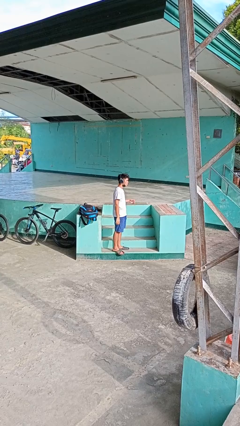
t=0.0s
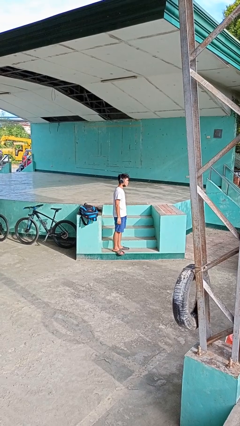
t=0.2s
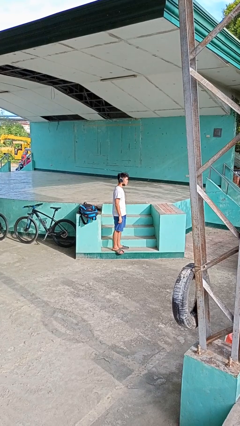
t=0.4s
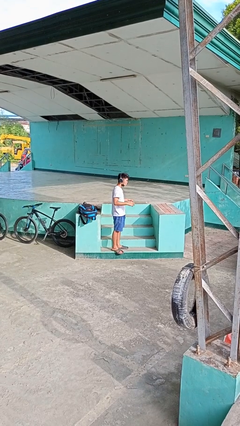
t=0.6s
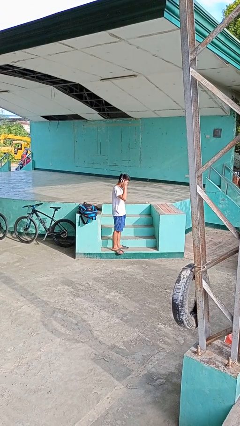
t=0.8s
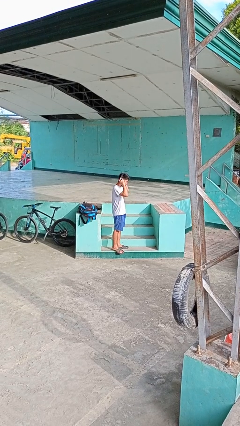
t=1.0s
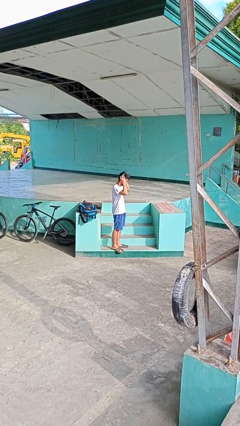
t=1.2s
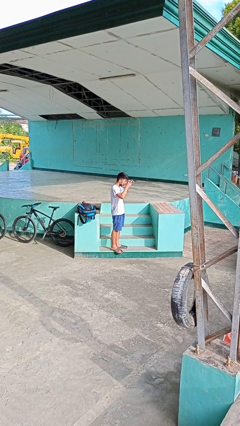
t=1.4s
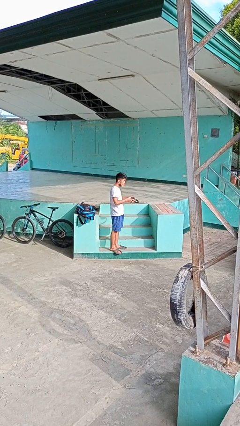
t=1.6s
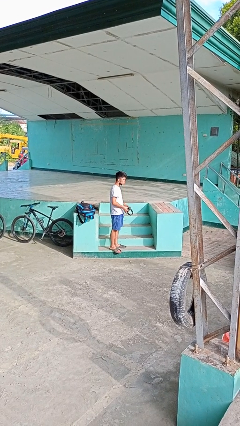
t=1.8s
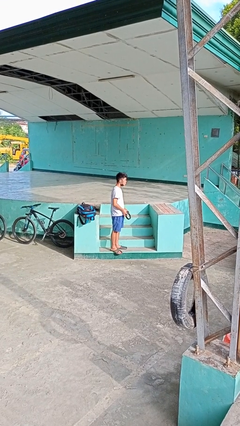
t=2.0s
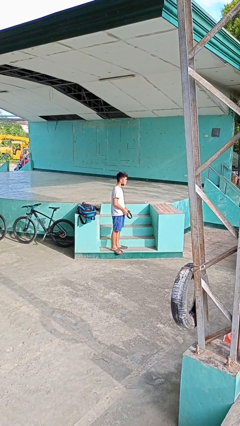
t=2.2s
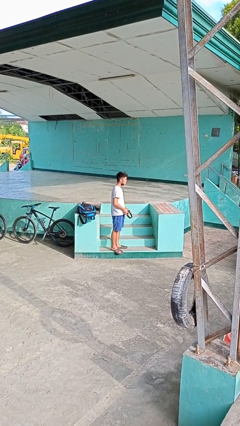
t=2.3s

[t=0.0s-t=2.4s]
person takes off headphones

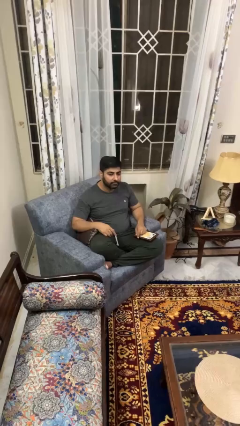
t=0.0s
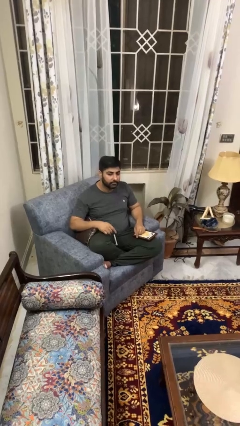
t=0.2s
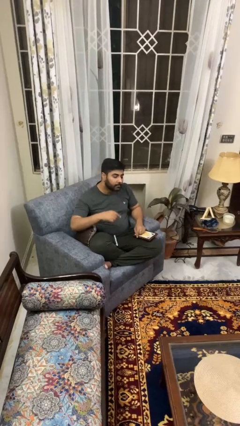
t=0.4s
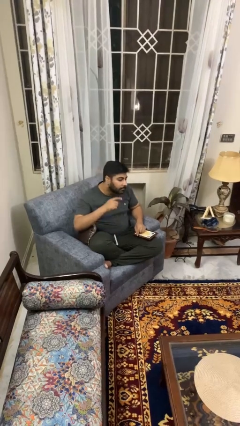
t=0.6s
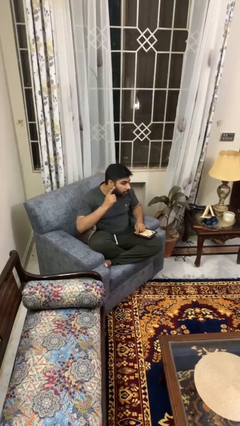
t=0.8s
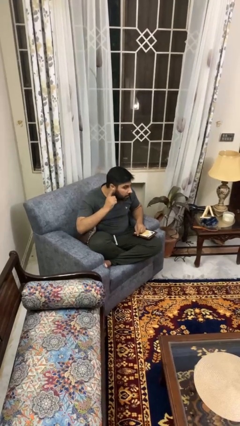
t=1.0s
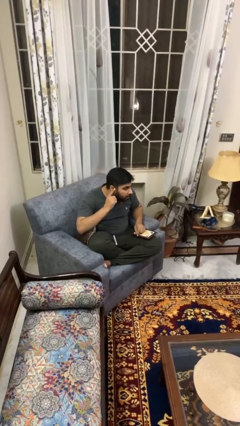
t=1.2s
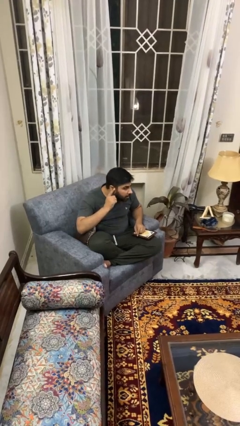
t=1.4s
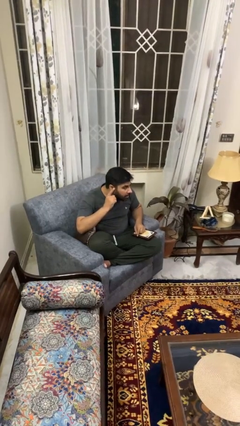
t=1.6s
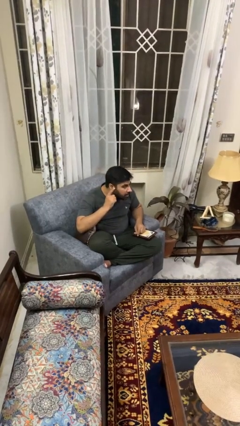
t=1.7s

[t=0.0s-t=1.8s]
person gestures listen closely

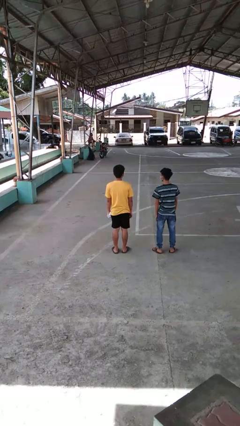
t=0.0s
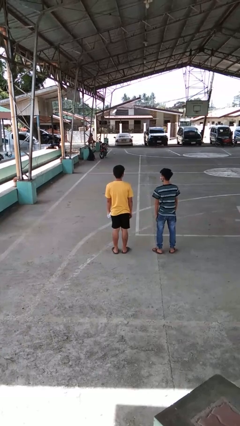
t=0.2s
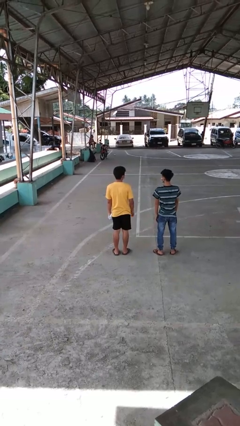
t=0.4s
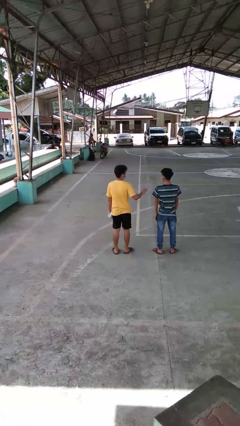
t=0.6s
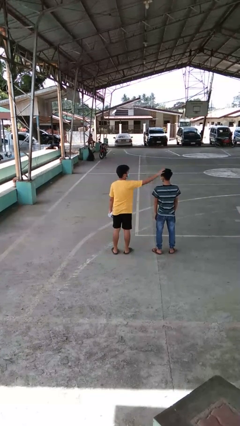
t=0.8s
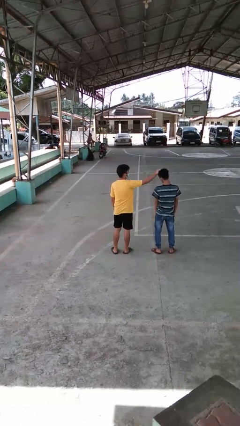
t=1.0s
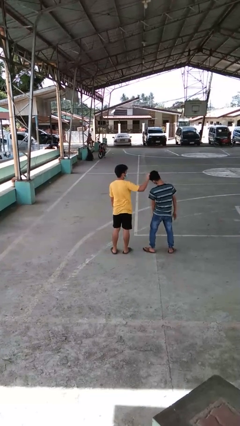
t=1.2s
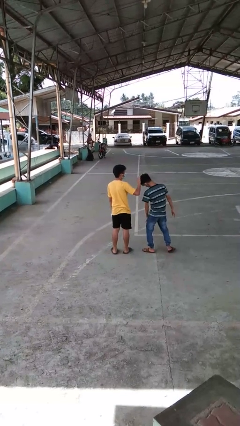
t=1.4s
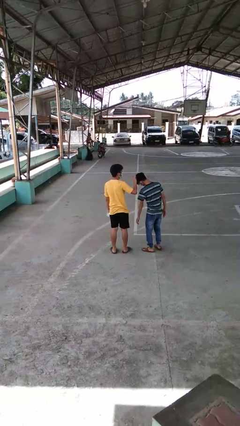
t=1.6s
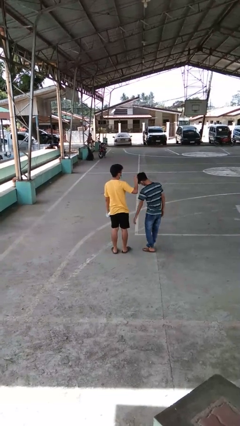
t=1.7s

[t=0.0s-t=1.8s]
person grabs person by hair

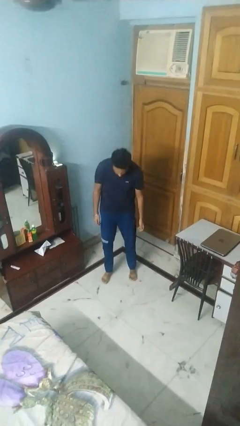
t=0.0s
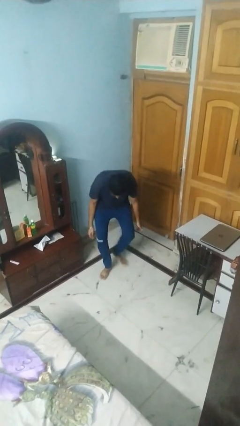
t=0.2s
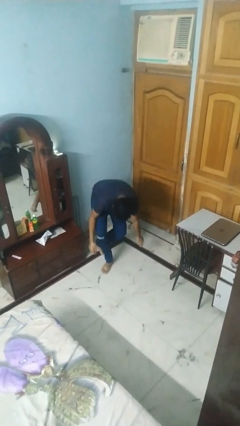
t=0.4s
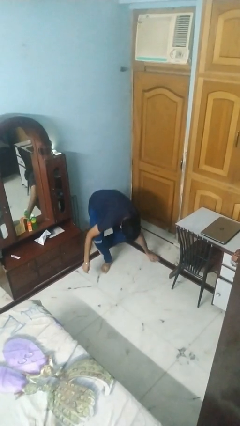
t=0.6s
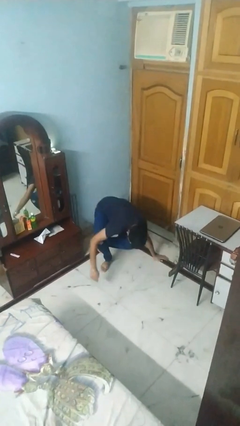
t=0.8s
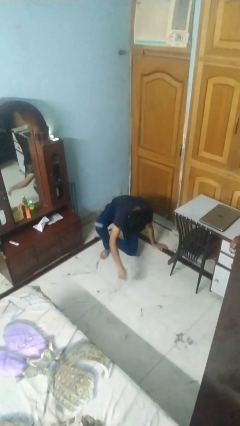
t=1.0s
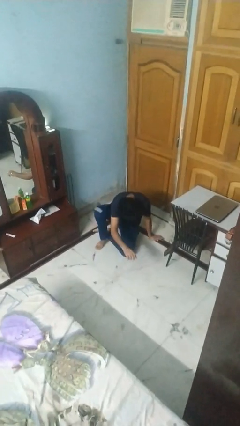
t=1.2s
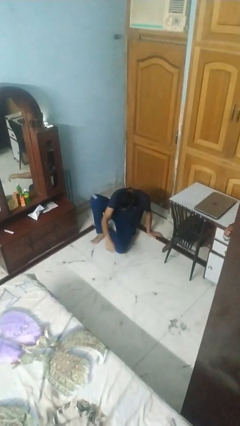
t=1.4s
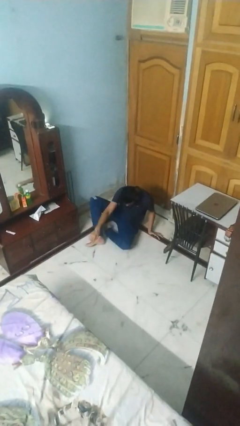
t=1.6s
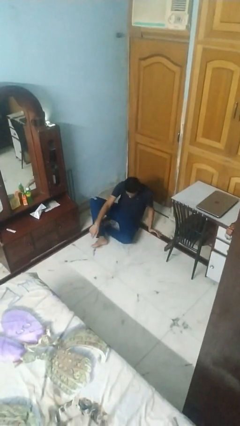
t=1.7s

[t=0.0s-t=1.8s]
person sits crisscross

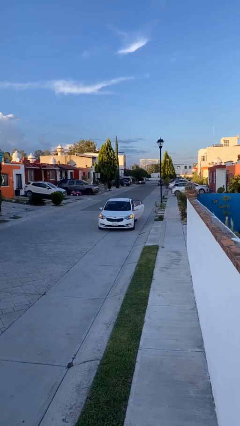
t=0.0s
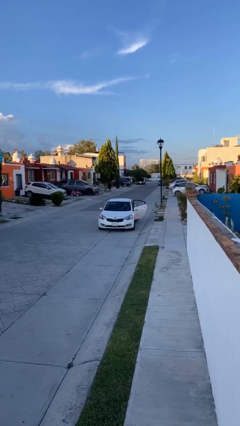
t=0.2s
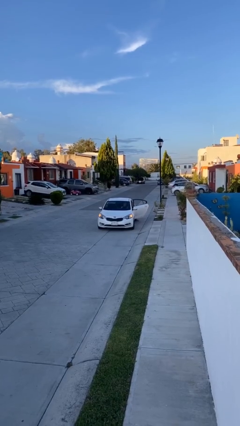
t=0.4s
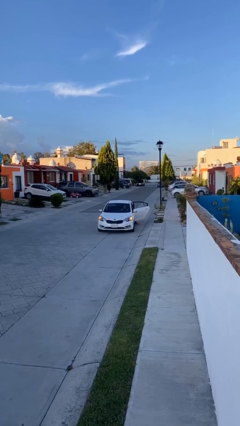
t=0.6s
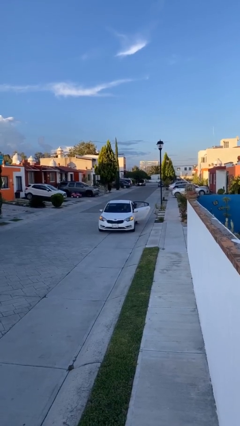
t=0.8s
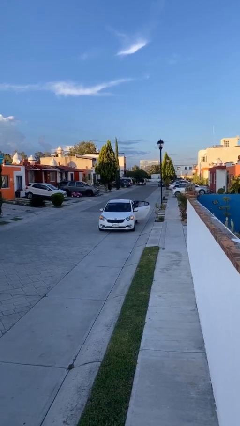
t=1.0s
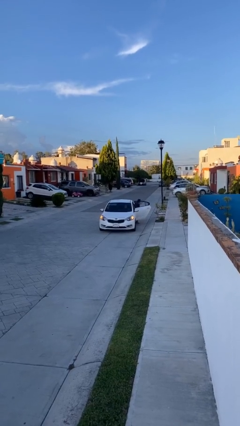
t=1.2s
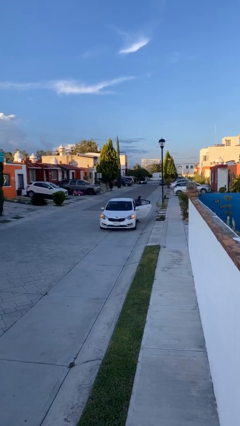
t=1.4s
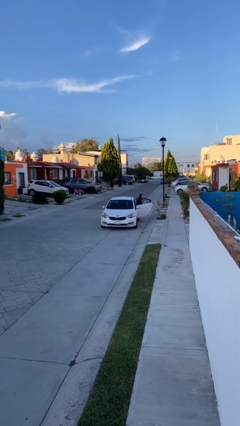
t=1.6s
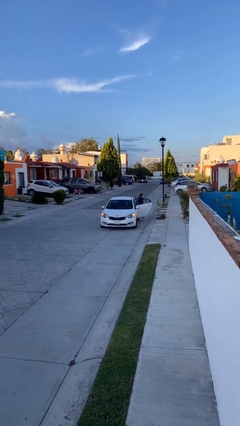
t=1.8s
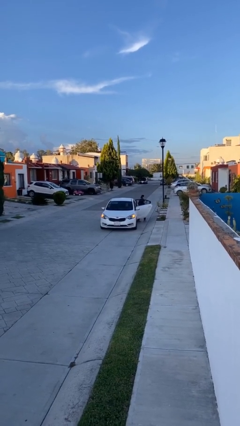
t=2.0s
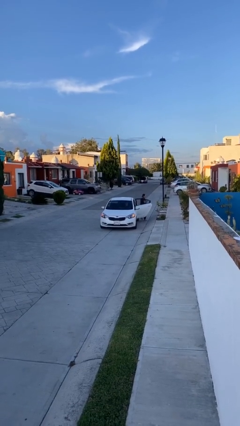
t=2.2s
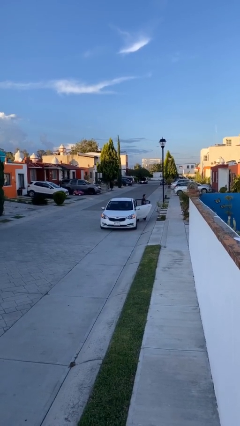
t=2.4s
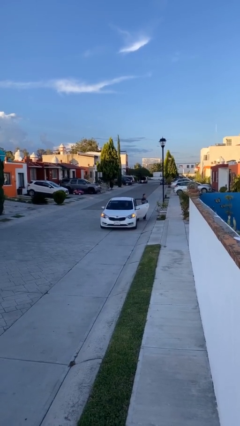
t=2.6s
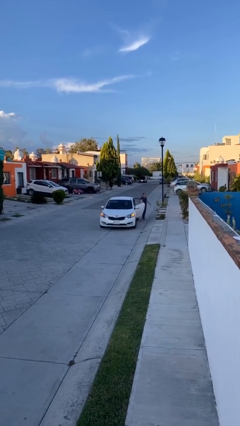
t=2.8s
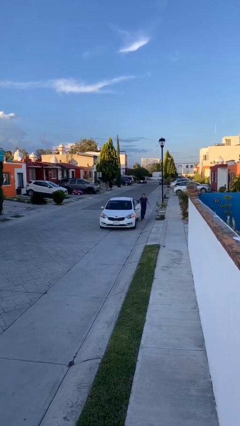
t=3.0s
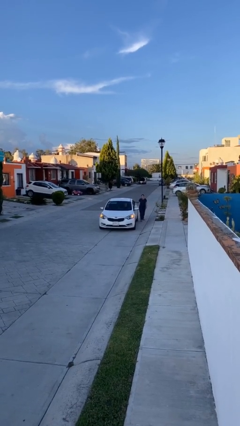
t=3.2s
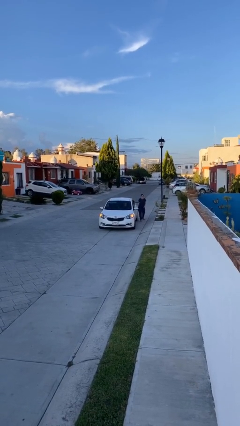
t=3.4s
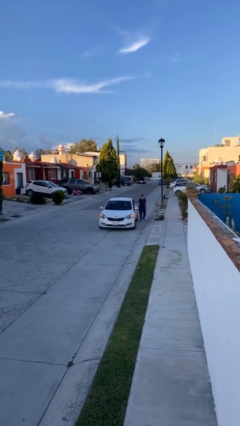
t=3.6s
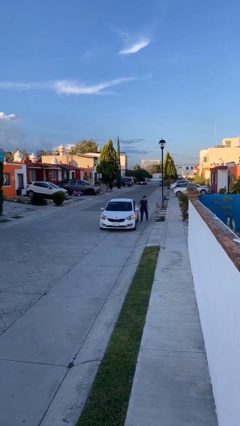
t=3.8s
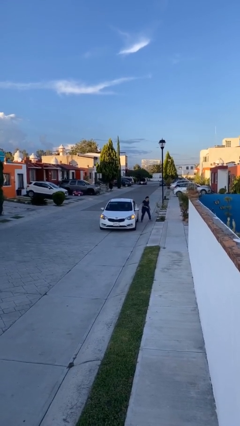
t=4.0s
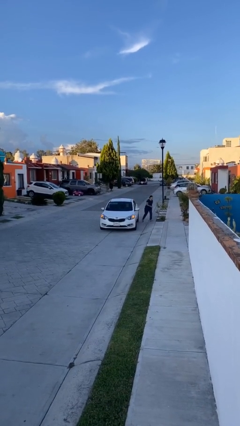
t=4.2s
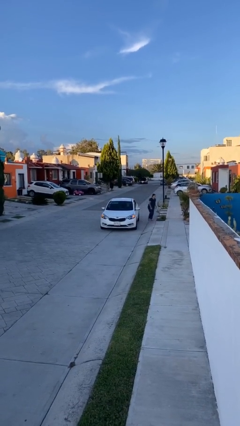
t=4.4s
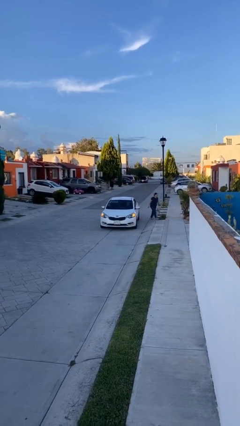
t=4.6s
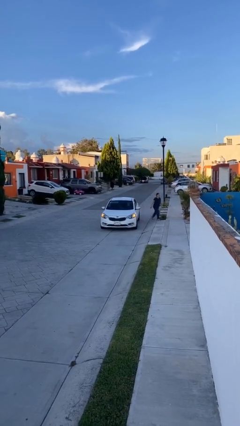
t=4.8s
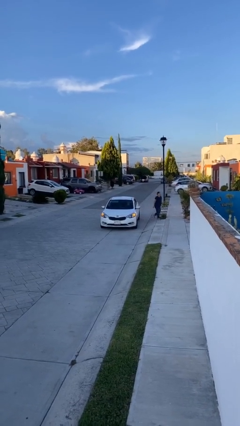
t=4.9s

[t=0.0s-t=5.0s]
car drops off person

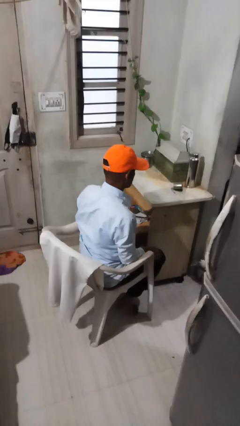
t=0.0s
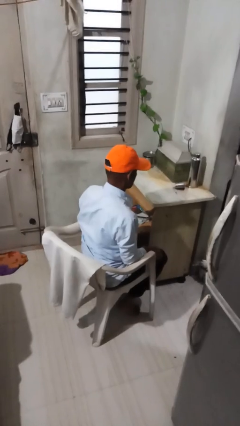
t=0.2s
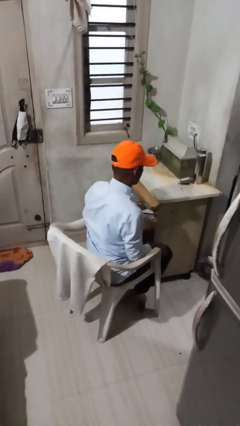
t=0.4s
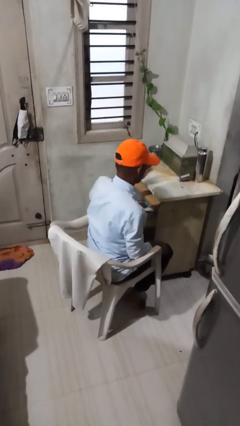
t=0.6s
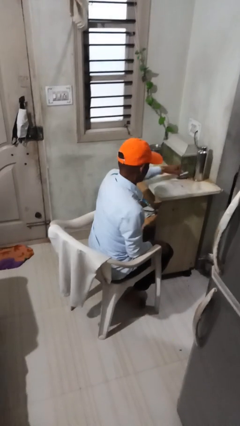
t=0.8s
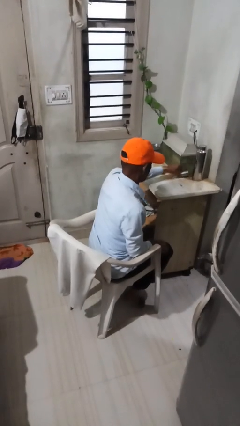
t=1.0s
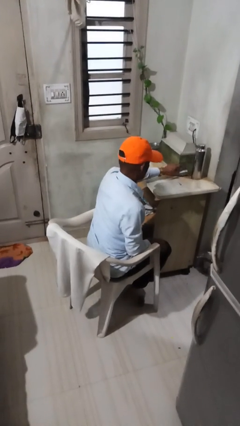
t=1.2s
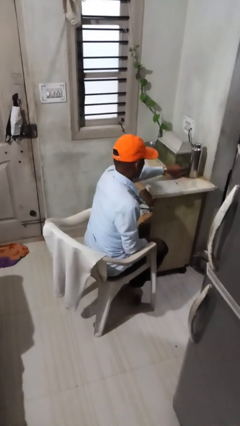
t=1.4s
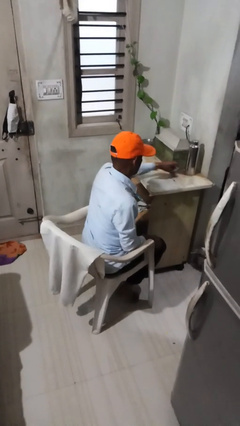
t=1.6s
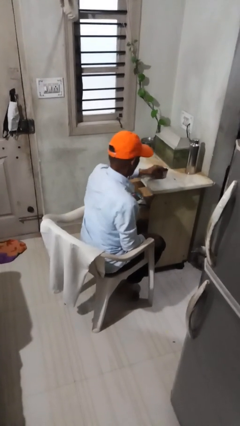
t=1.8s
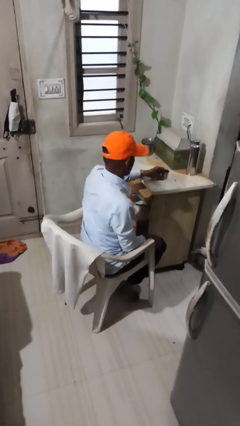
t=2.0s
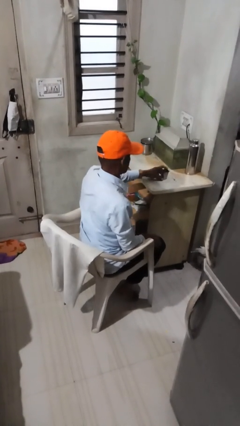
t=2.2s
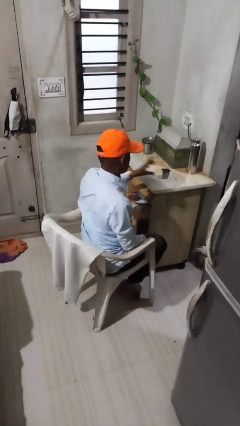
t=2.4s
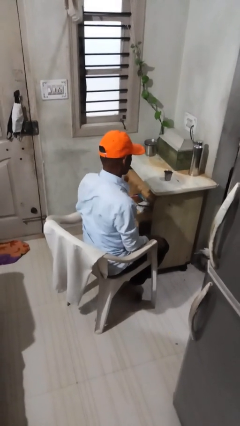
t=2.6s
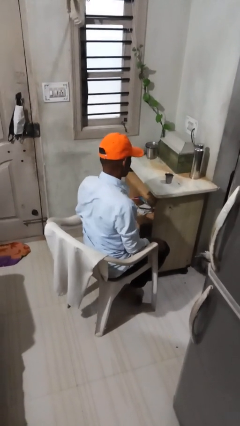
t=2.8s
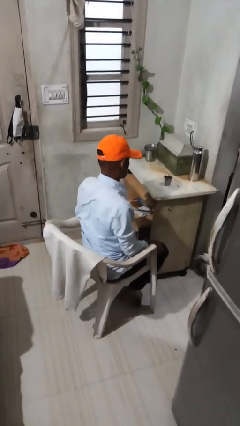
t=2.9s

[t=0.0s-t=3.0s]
person sets upright glass

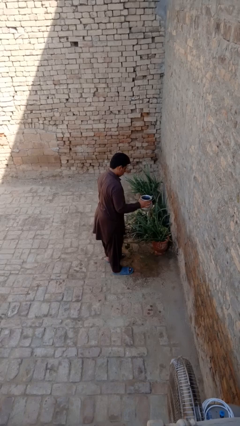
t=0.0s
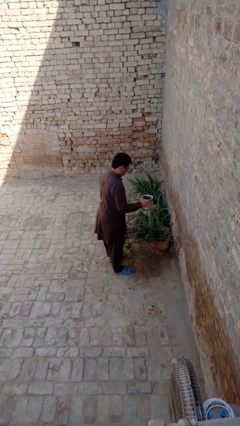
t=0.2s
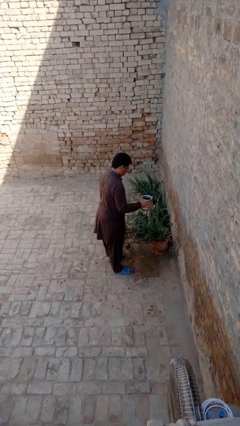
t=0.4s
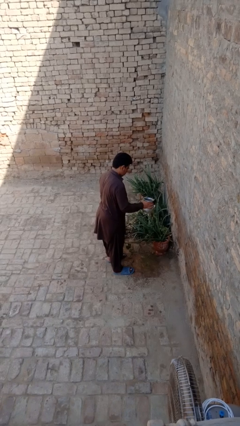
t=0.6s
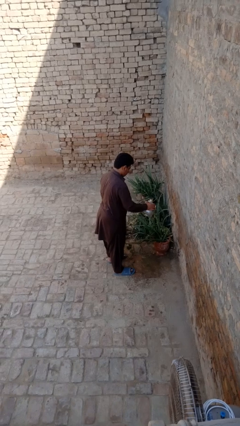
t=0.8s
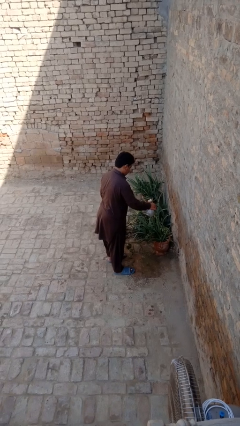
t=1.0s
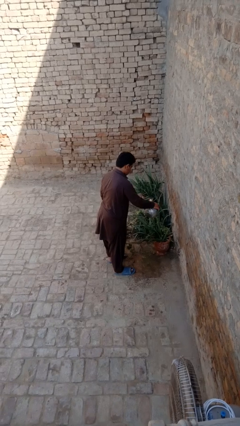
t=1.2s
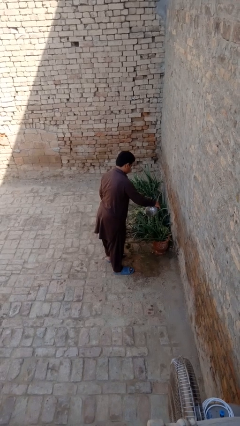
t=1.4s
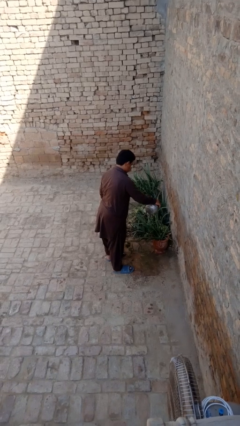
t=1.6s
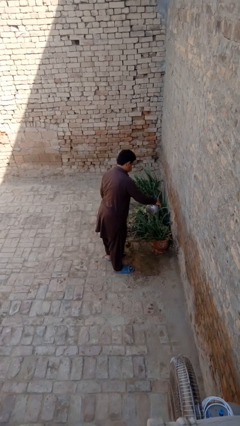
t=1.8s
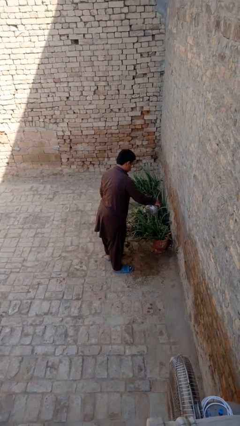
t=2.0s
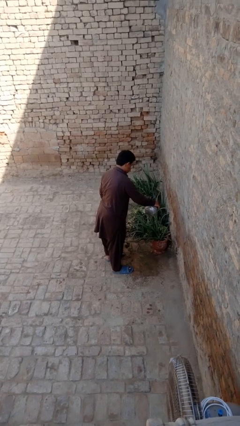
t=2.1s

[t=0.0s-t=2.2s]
person waters houseplant
